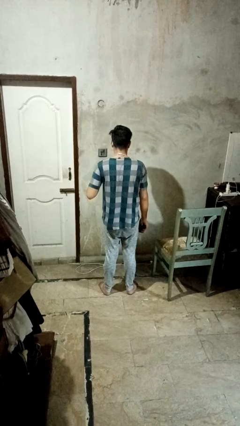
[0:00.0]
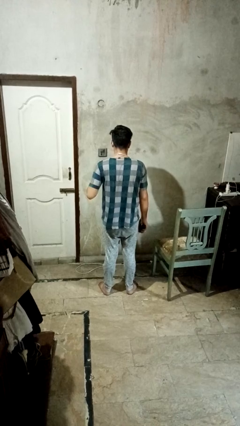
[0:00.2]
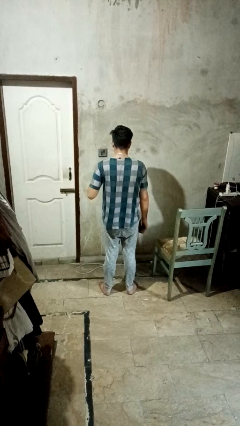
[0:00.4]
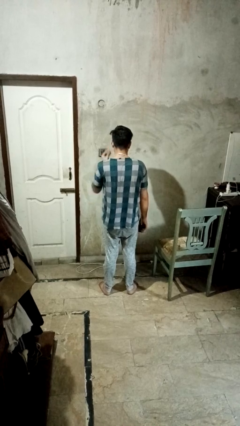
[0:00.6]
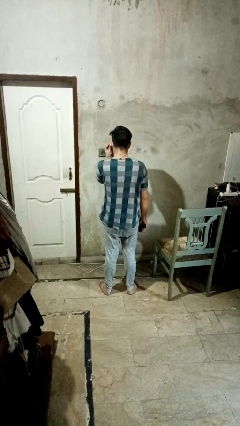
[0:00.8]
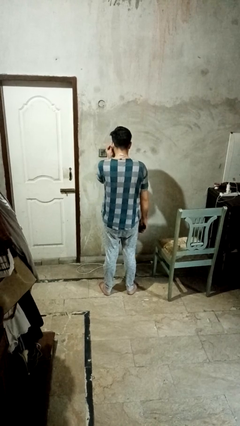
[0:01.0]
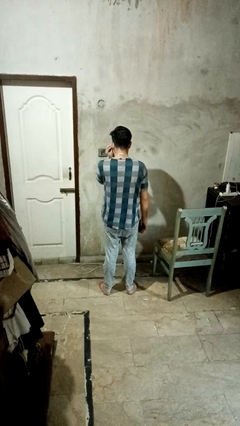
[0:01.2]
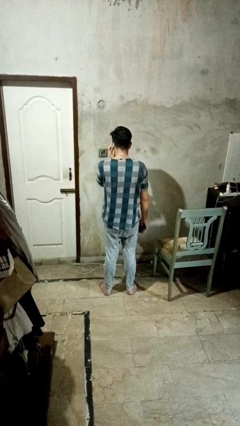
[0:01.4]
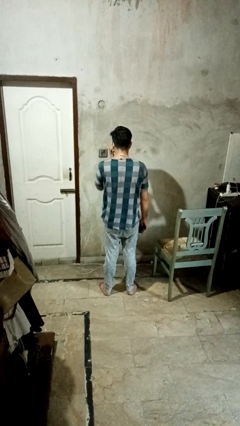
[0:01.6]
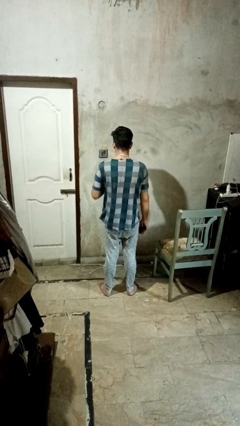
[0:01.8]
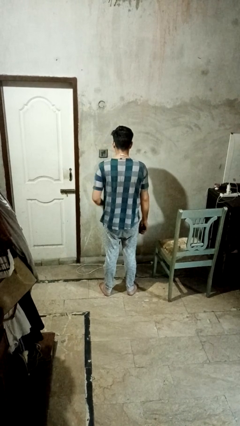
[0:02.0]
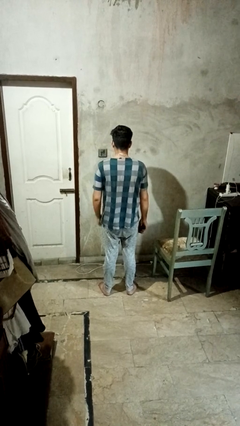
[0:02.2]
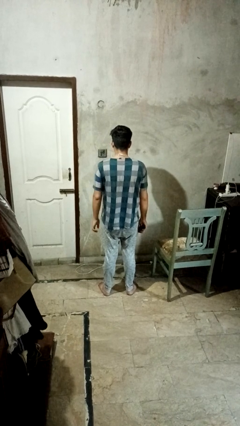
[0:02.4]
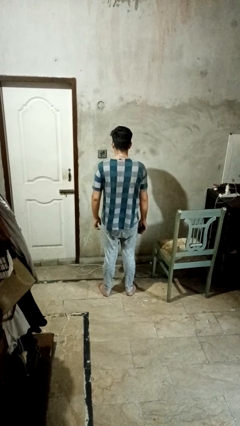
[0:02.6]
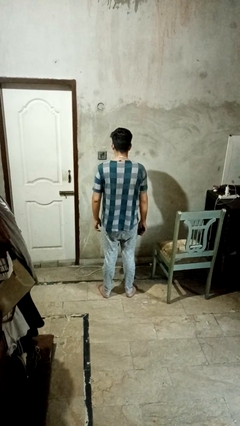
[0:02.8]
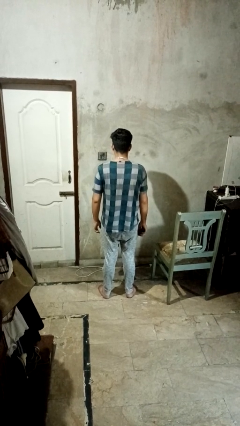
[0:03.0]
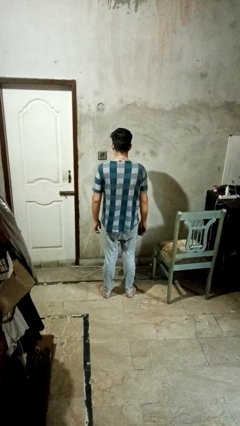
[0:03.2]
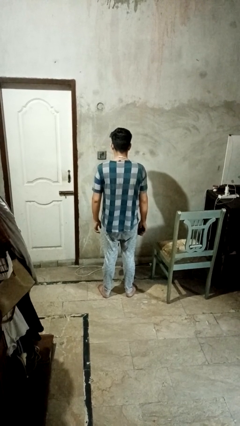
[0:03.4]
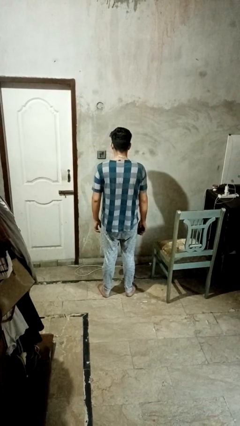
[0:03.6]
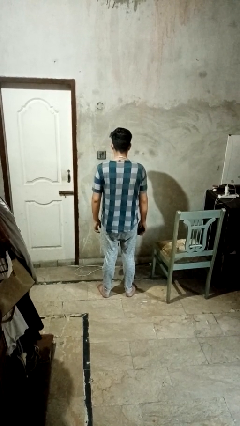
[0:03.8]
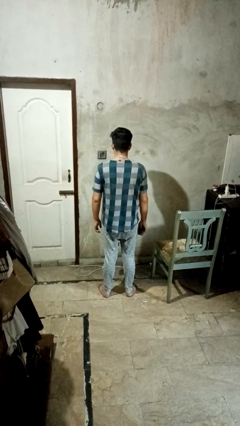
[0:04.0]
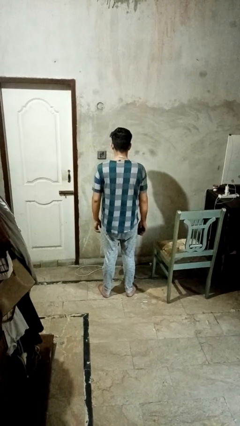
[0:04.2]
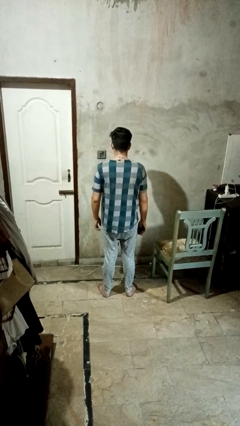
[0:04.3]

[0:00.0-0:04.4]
person puts on headphones

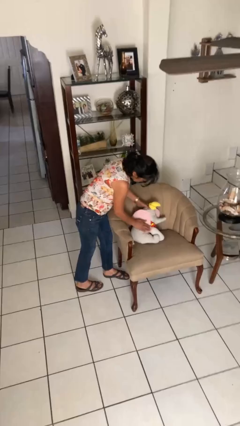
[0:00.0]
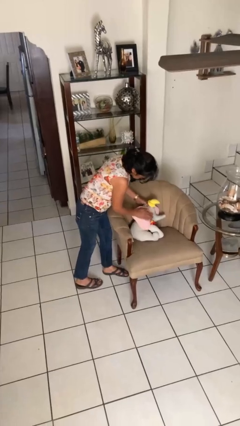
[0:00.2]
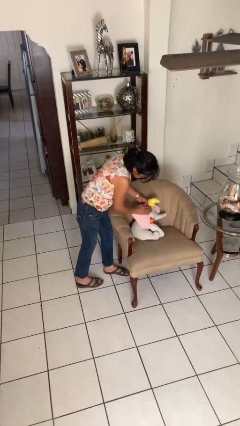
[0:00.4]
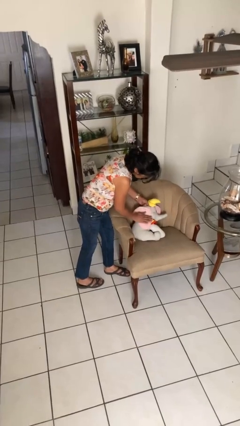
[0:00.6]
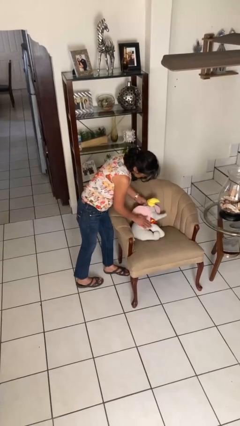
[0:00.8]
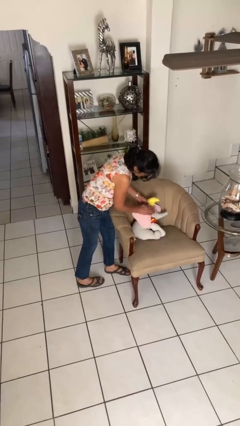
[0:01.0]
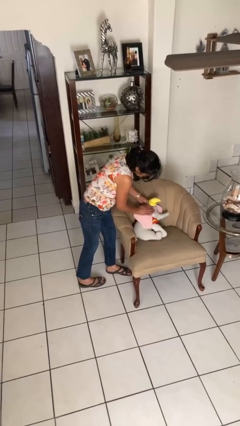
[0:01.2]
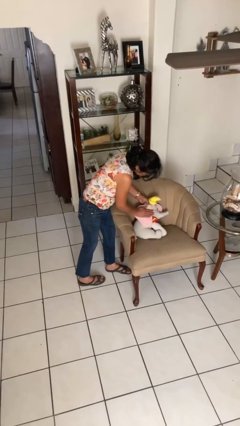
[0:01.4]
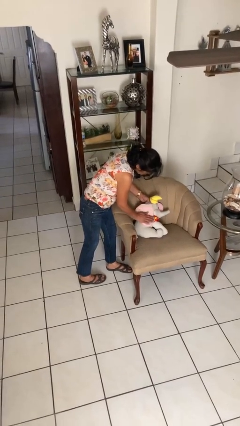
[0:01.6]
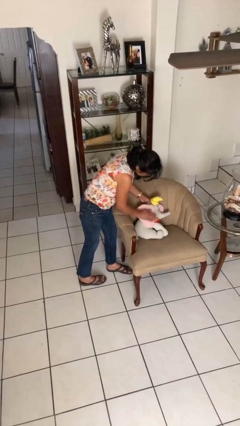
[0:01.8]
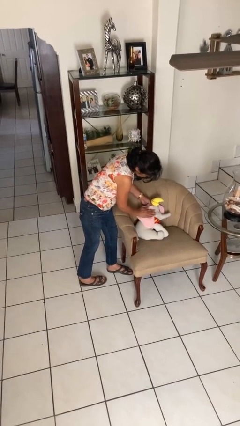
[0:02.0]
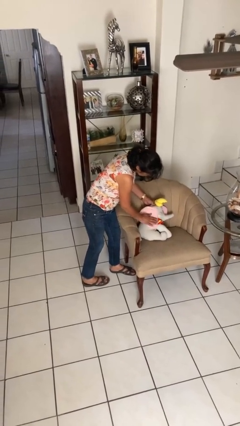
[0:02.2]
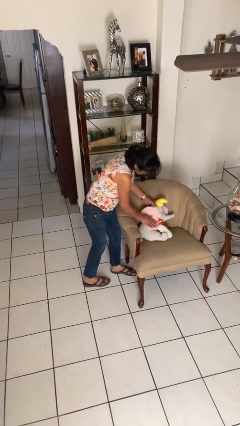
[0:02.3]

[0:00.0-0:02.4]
person waves hand over object

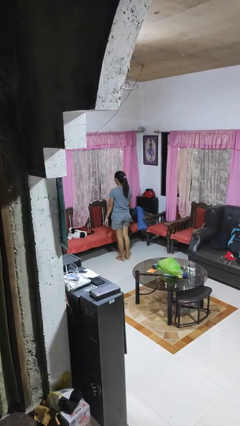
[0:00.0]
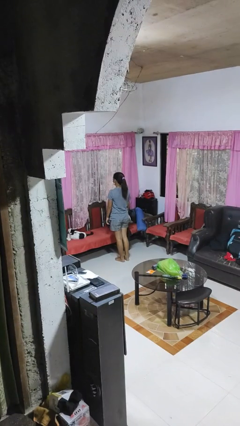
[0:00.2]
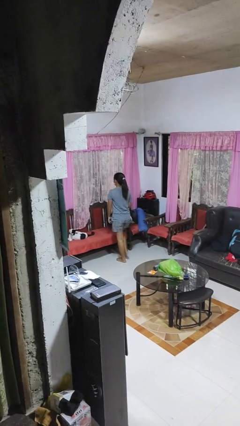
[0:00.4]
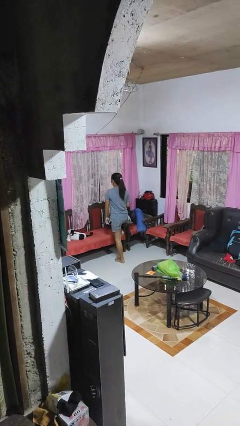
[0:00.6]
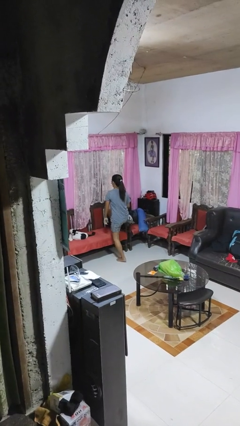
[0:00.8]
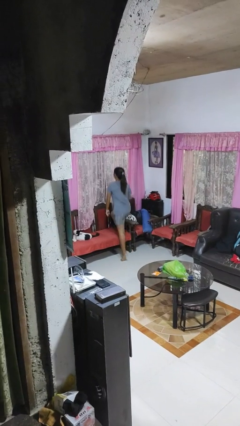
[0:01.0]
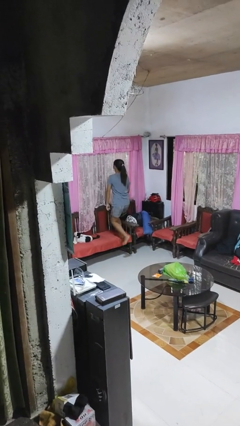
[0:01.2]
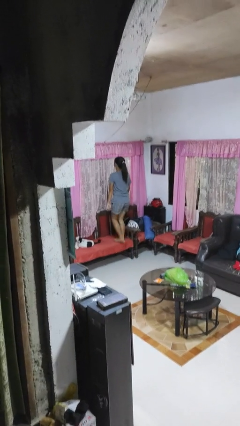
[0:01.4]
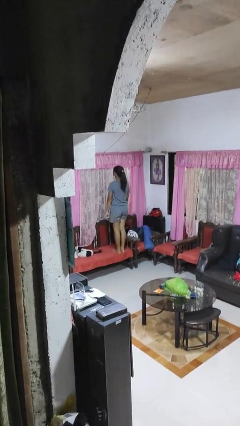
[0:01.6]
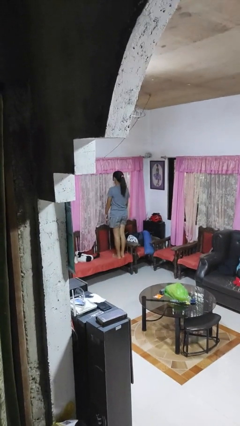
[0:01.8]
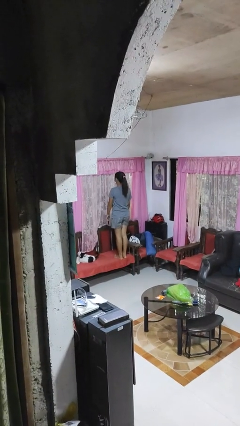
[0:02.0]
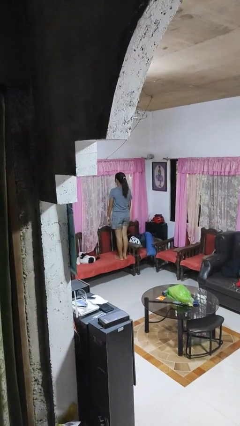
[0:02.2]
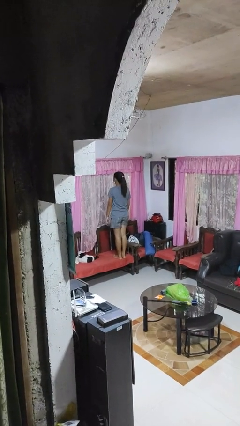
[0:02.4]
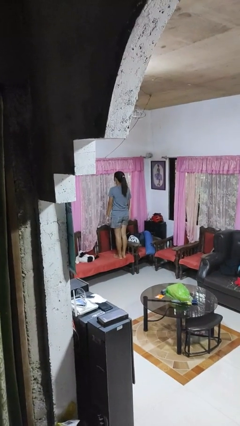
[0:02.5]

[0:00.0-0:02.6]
person climbs on chair

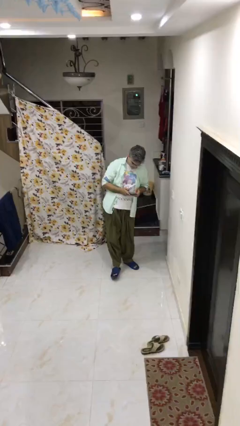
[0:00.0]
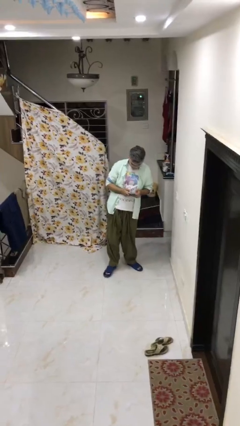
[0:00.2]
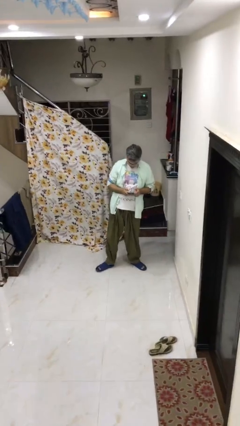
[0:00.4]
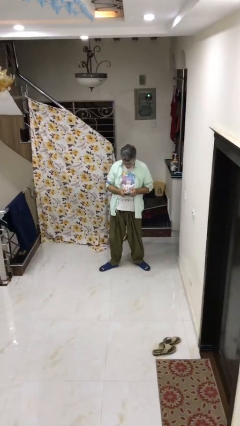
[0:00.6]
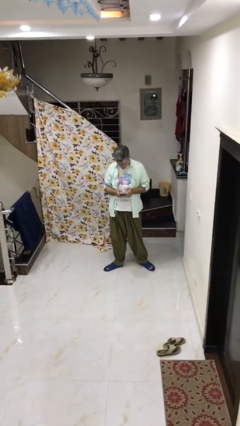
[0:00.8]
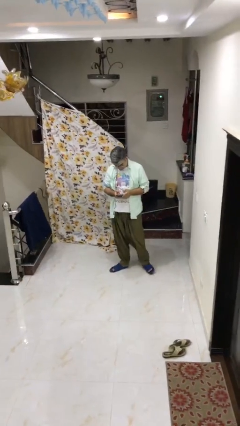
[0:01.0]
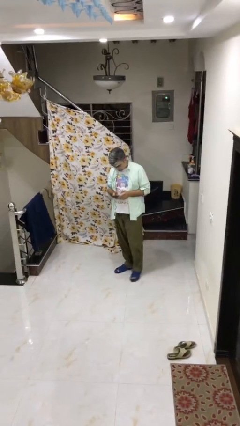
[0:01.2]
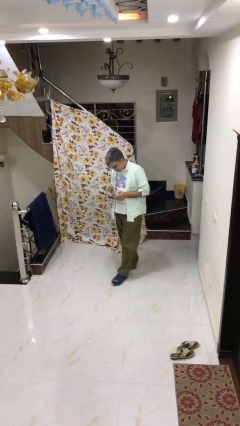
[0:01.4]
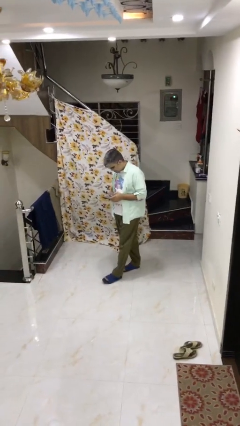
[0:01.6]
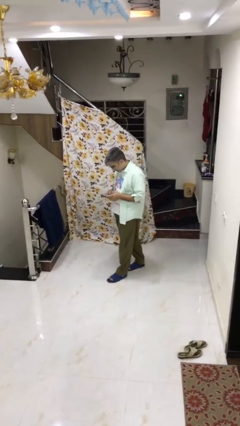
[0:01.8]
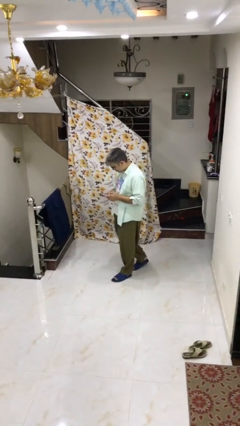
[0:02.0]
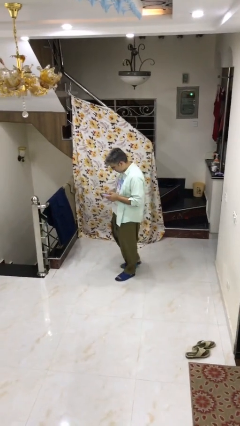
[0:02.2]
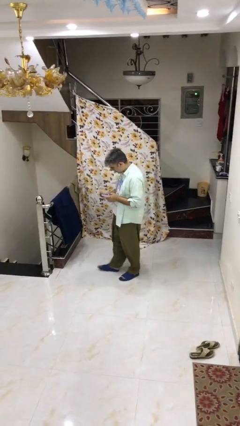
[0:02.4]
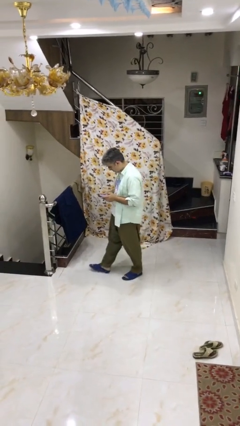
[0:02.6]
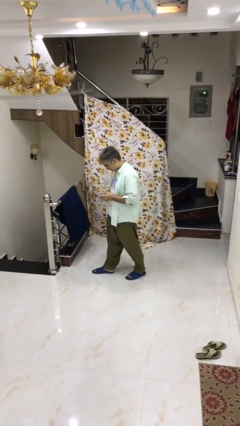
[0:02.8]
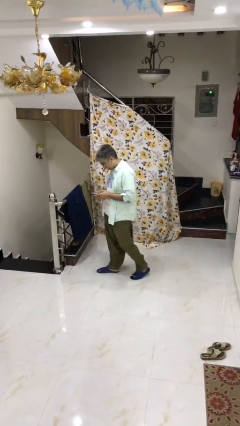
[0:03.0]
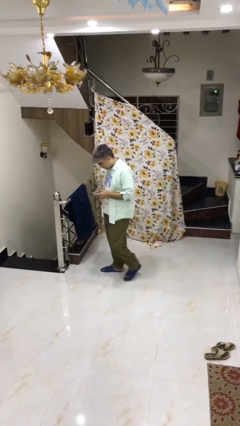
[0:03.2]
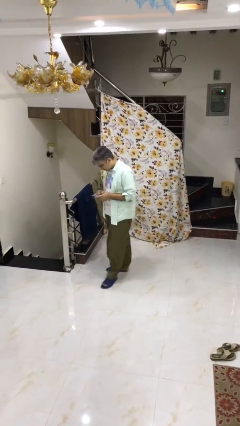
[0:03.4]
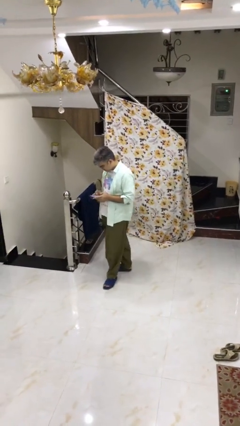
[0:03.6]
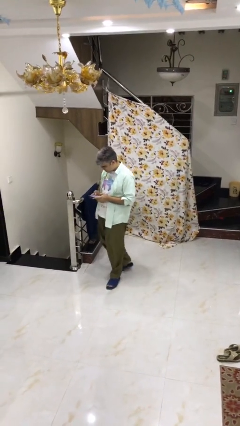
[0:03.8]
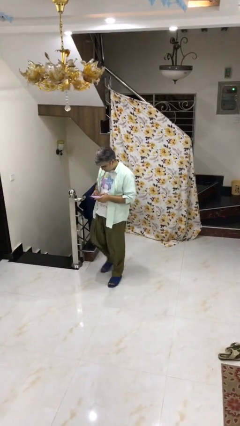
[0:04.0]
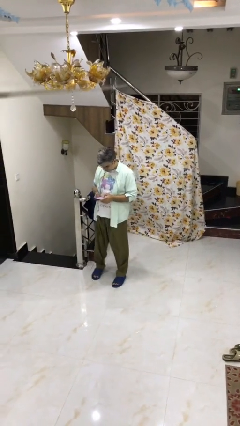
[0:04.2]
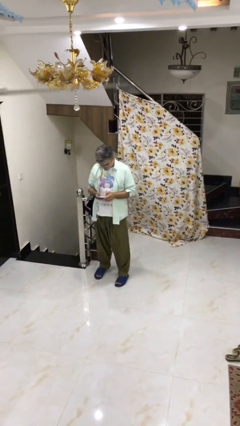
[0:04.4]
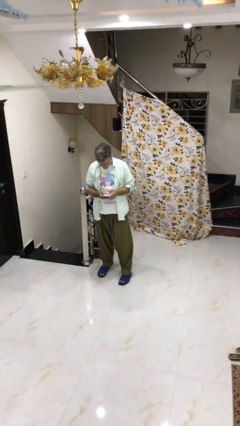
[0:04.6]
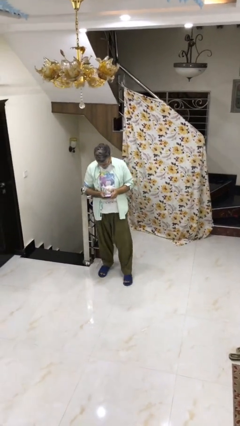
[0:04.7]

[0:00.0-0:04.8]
person texts on phone

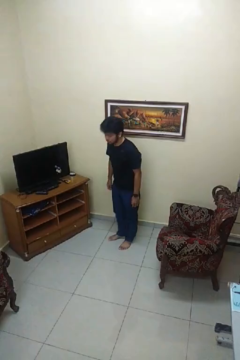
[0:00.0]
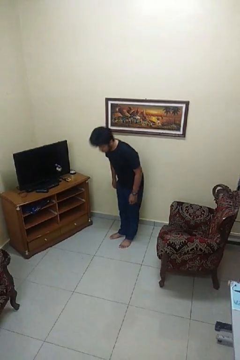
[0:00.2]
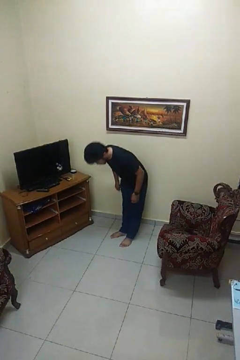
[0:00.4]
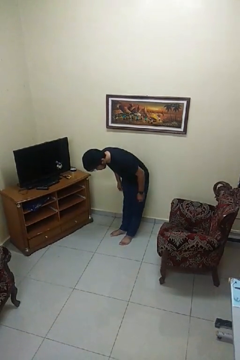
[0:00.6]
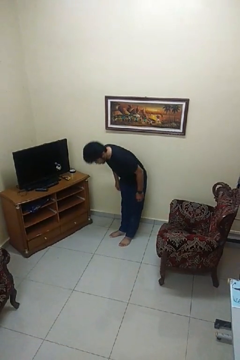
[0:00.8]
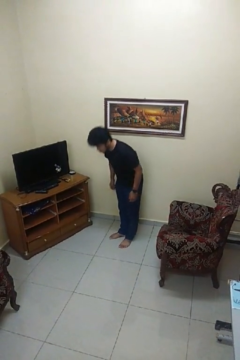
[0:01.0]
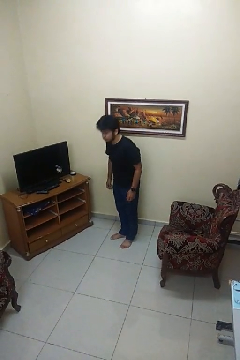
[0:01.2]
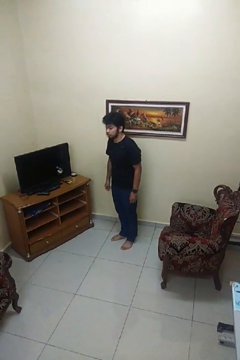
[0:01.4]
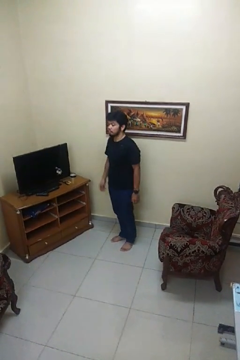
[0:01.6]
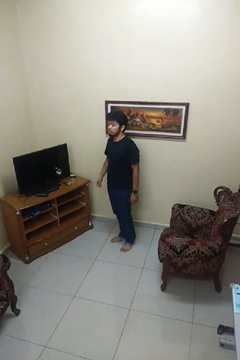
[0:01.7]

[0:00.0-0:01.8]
person bows

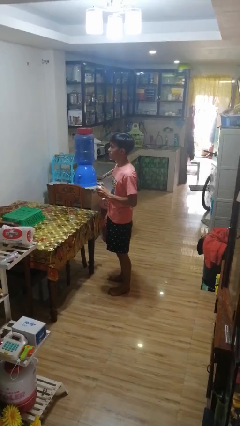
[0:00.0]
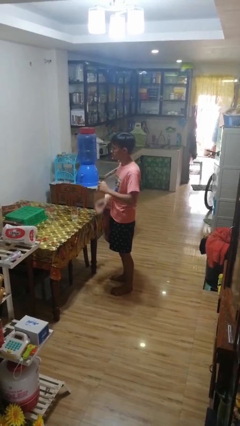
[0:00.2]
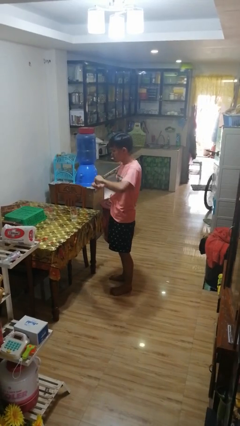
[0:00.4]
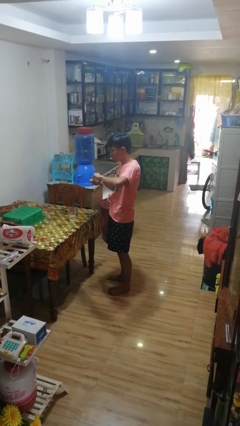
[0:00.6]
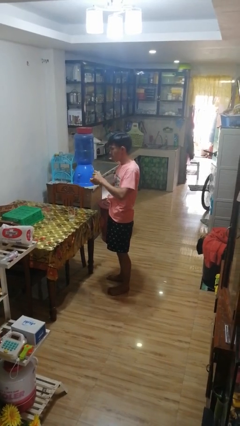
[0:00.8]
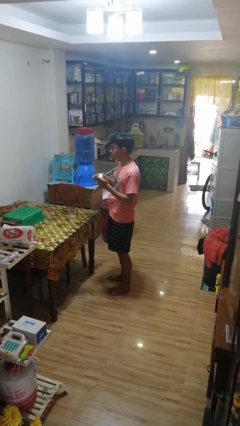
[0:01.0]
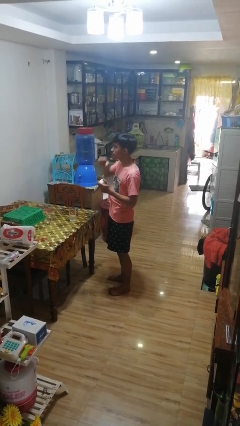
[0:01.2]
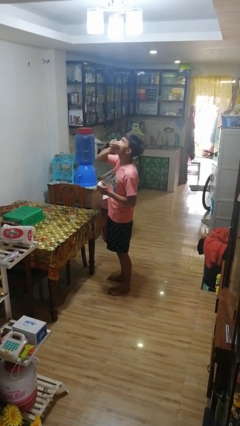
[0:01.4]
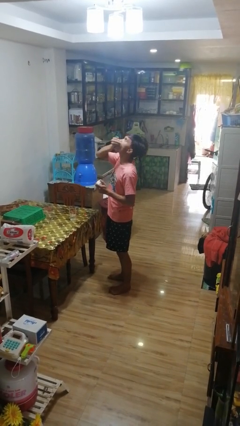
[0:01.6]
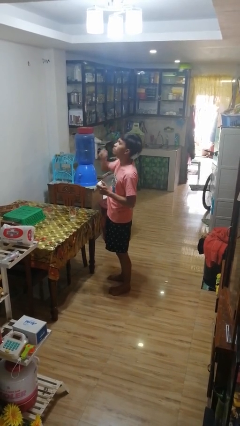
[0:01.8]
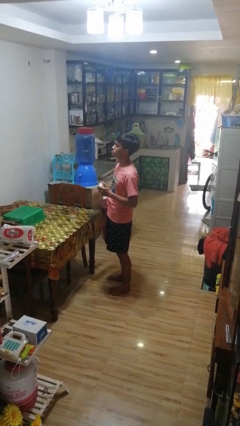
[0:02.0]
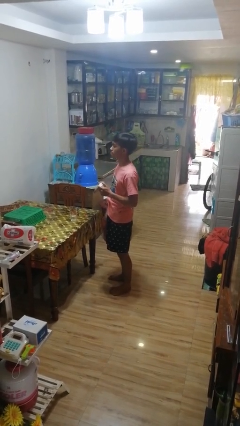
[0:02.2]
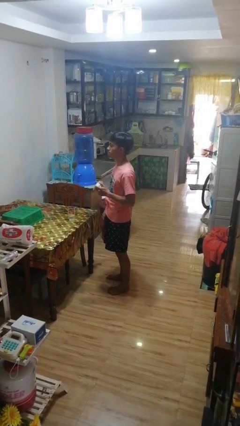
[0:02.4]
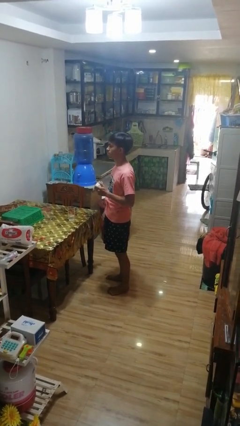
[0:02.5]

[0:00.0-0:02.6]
person takes medicine pills
